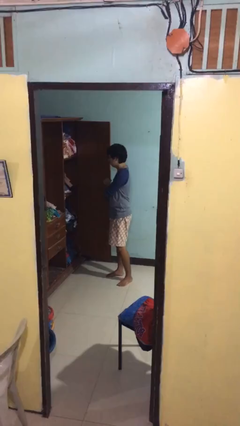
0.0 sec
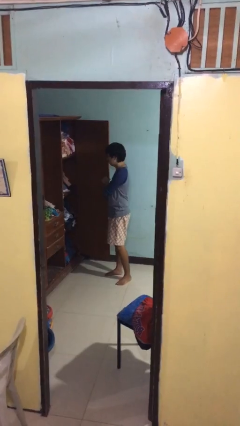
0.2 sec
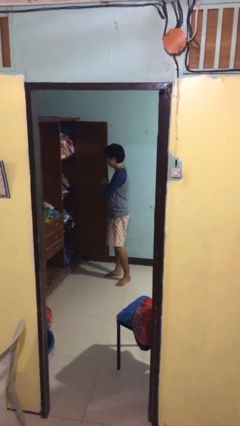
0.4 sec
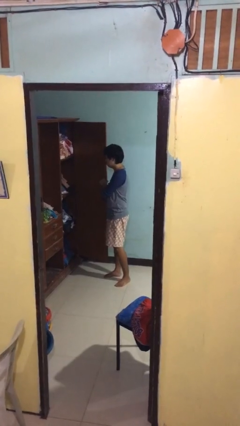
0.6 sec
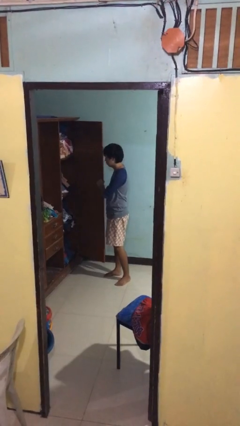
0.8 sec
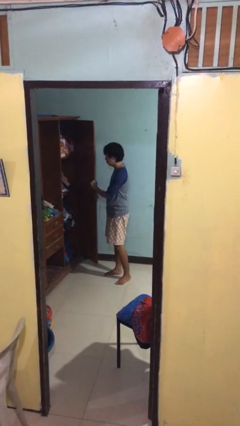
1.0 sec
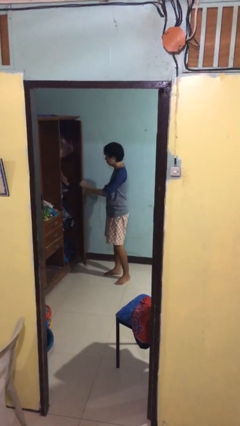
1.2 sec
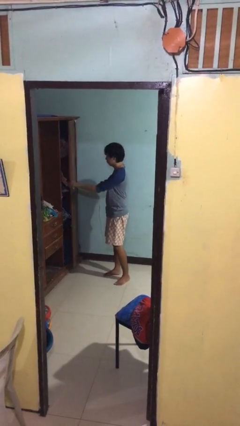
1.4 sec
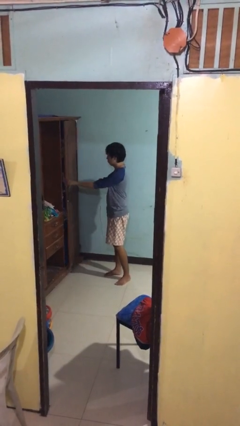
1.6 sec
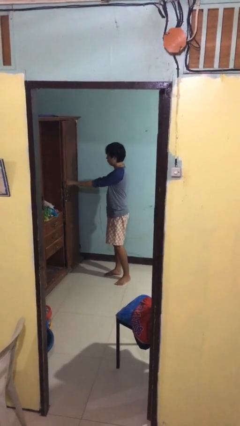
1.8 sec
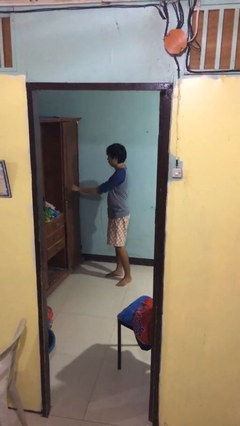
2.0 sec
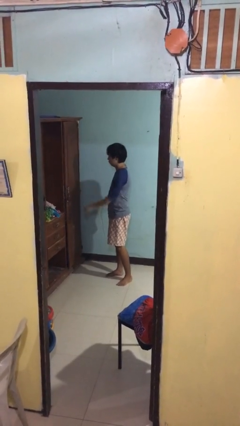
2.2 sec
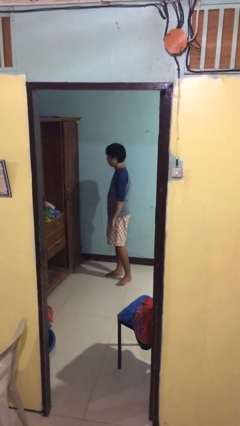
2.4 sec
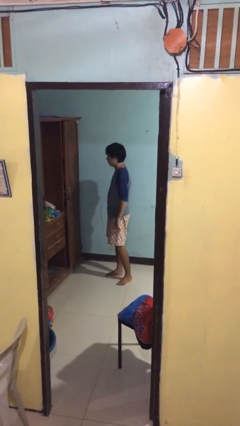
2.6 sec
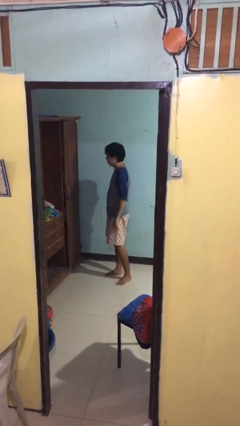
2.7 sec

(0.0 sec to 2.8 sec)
person closes closet door

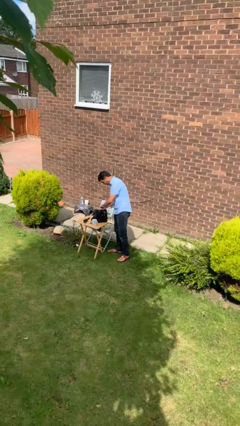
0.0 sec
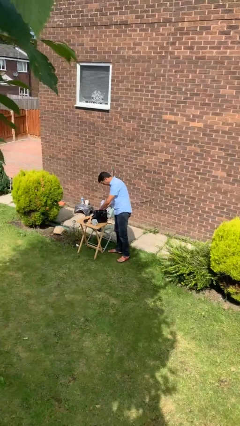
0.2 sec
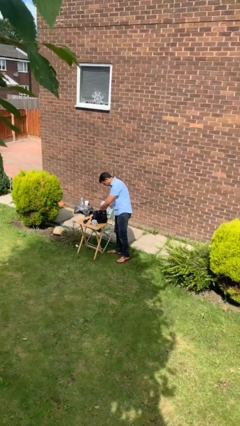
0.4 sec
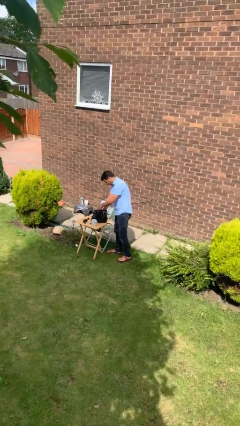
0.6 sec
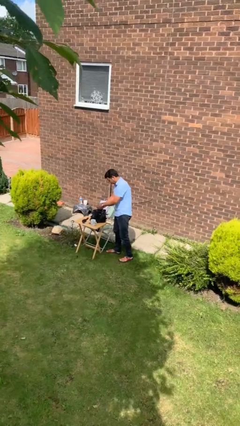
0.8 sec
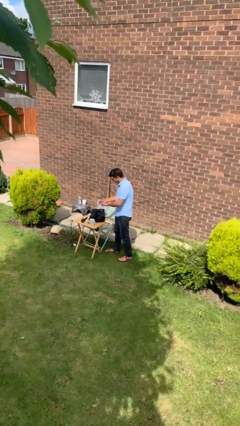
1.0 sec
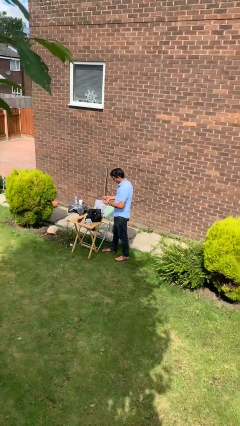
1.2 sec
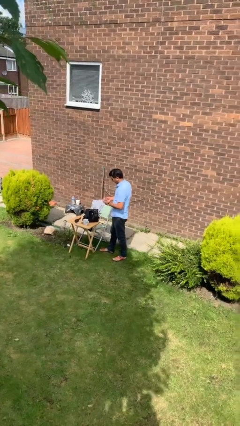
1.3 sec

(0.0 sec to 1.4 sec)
person takes object from backpack

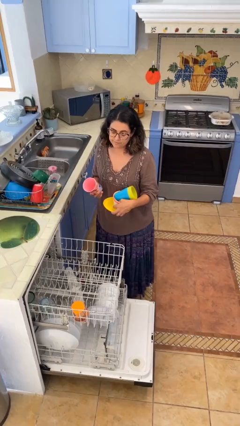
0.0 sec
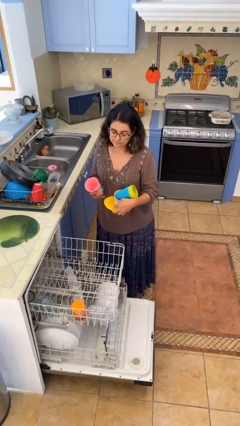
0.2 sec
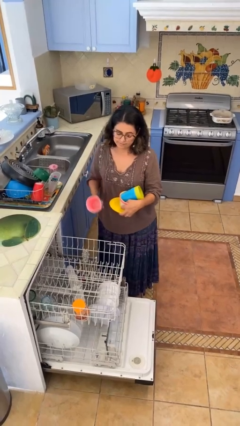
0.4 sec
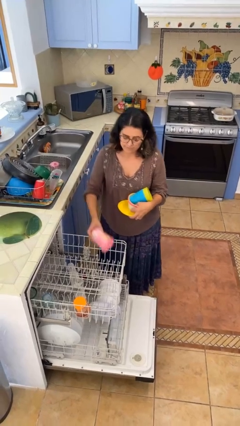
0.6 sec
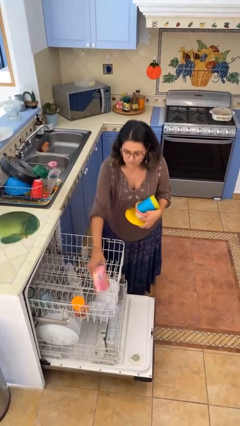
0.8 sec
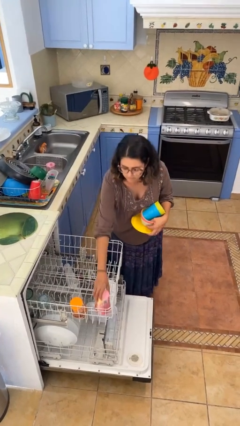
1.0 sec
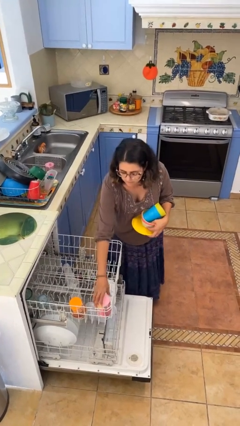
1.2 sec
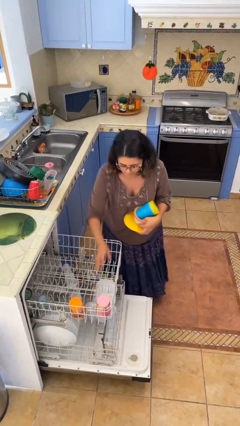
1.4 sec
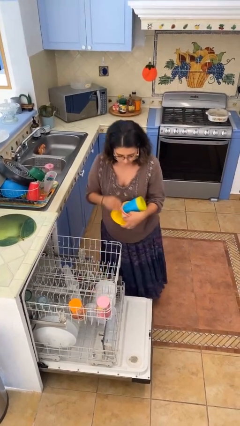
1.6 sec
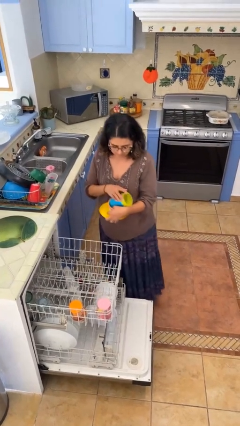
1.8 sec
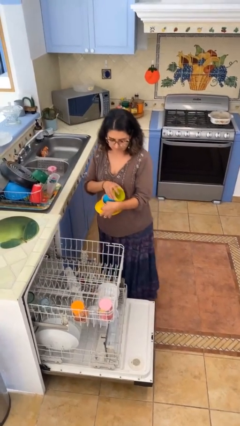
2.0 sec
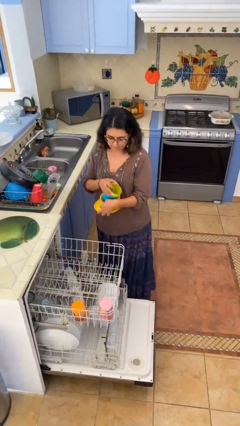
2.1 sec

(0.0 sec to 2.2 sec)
person loads dishwasher

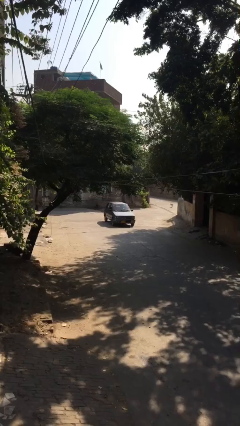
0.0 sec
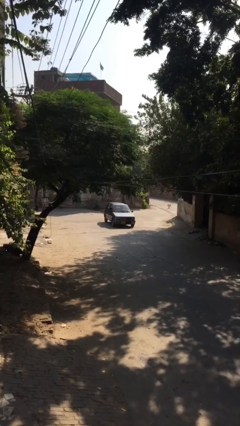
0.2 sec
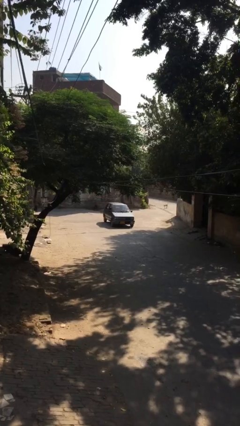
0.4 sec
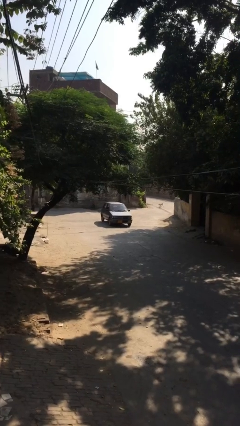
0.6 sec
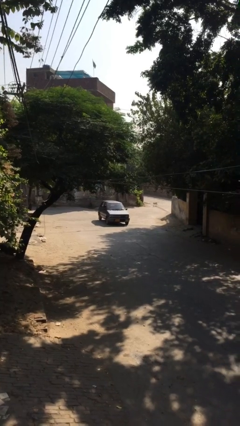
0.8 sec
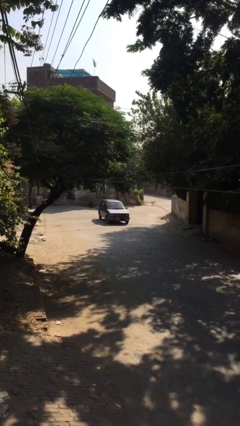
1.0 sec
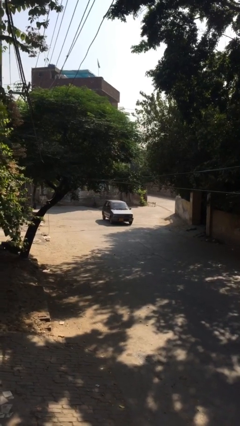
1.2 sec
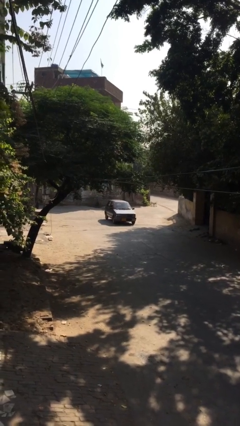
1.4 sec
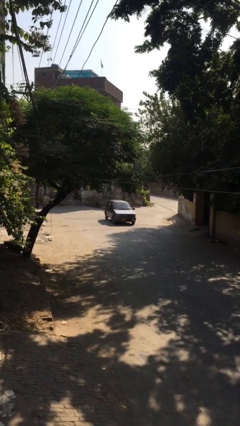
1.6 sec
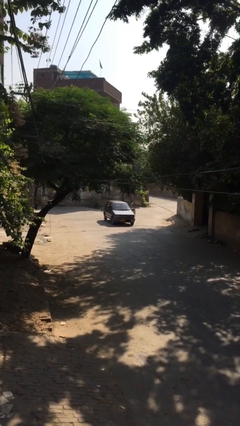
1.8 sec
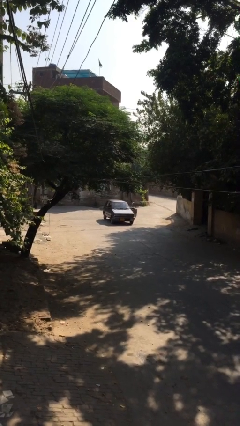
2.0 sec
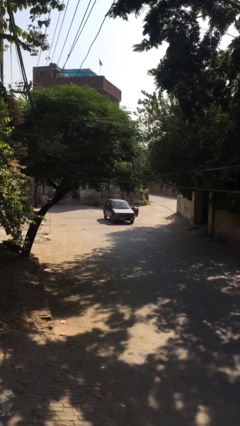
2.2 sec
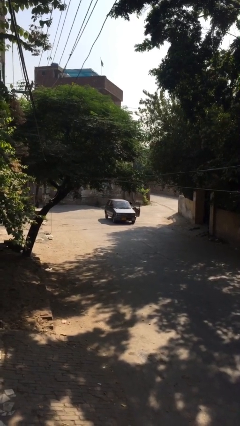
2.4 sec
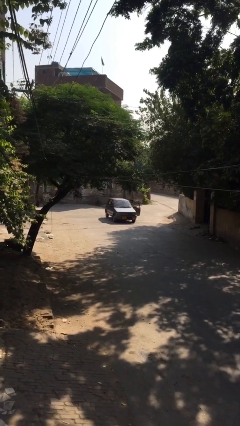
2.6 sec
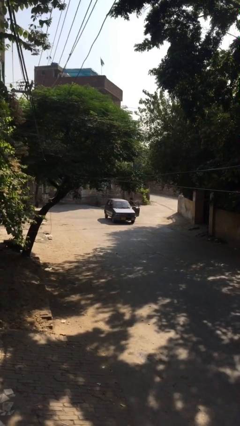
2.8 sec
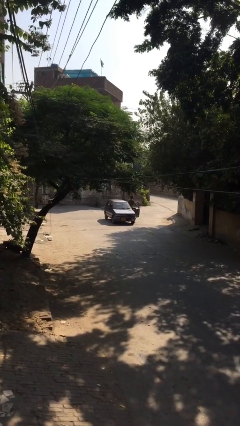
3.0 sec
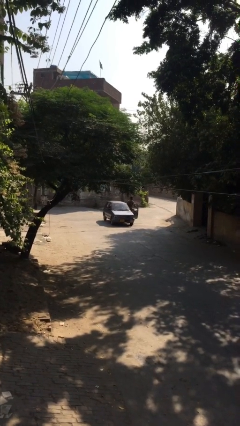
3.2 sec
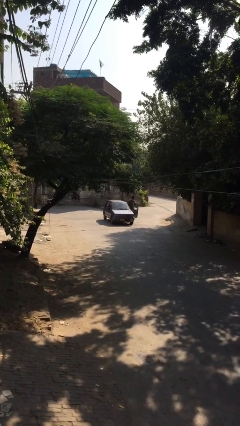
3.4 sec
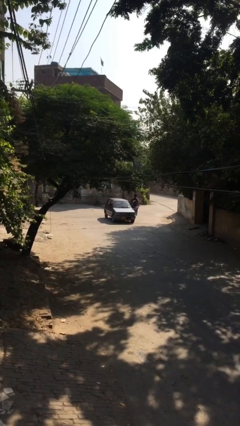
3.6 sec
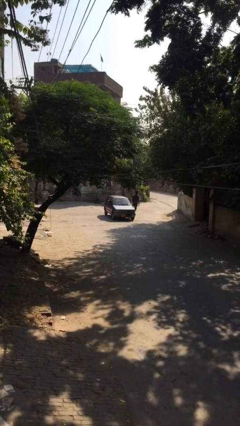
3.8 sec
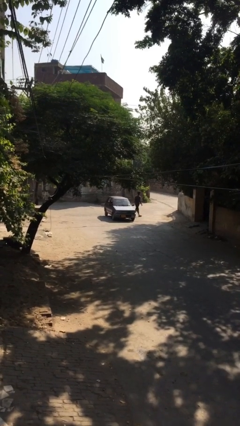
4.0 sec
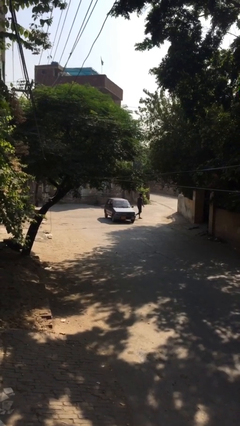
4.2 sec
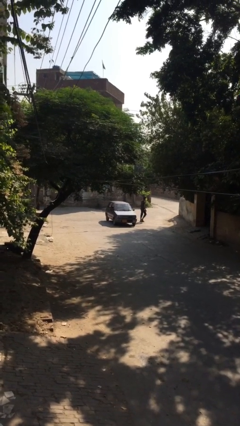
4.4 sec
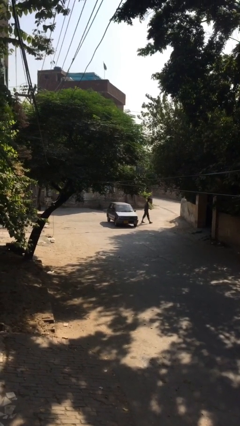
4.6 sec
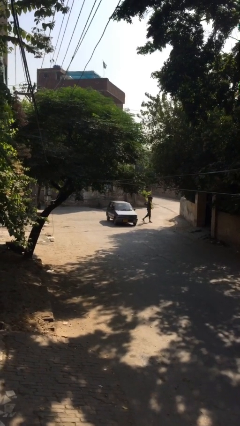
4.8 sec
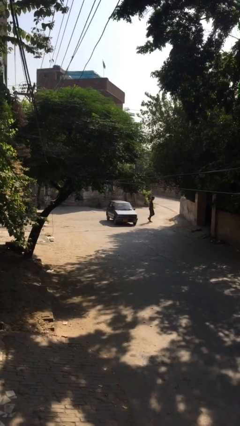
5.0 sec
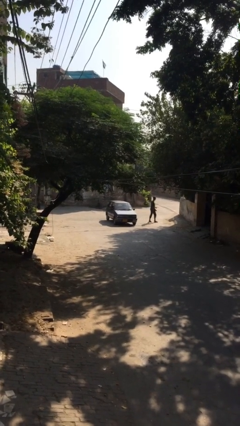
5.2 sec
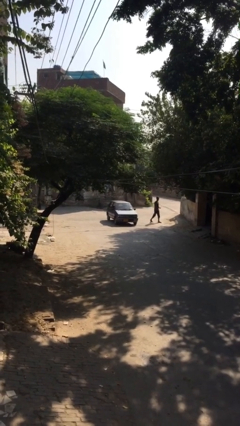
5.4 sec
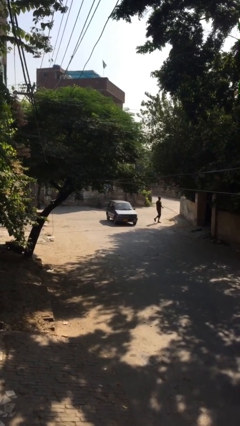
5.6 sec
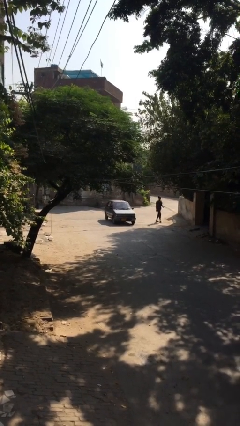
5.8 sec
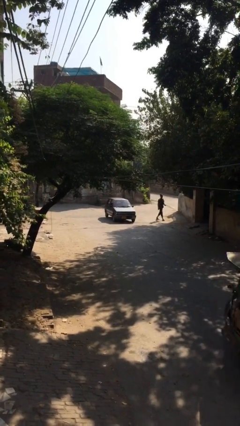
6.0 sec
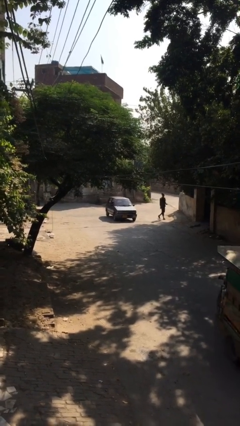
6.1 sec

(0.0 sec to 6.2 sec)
car drops off person

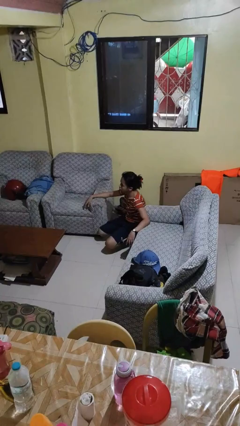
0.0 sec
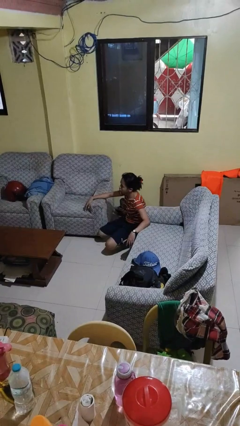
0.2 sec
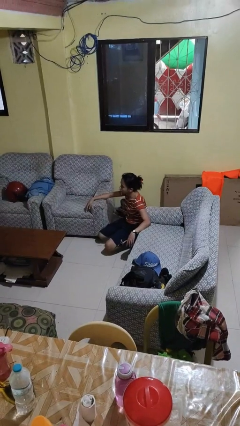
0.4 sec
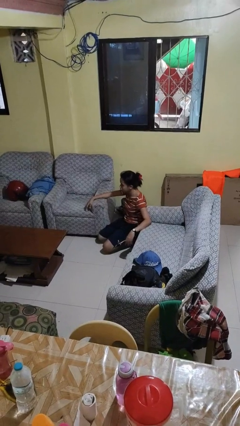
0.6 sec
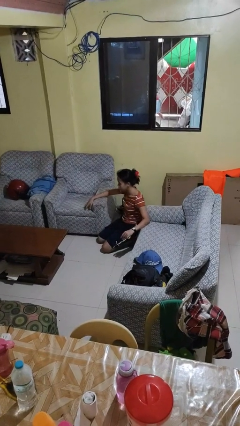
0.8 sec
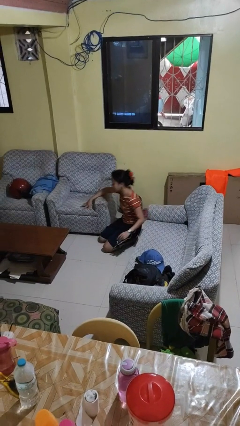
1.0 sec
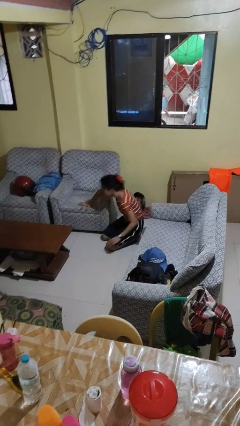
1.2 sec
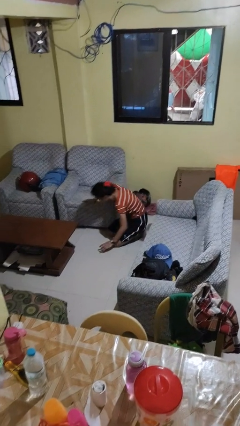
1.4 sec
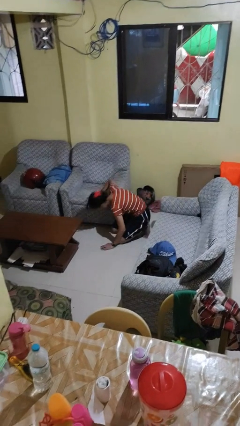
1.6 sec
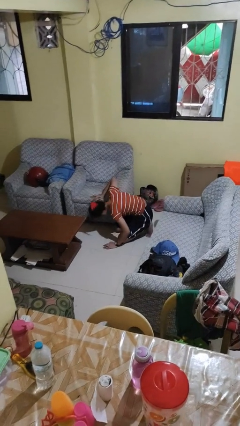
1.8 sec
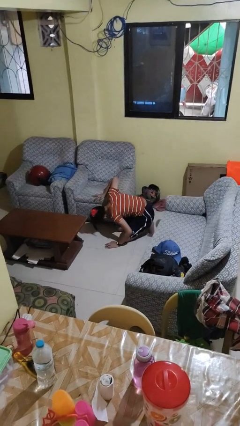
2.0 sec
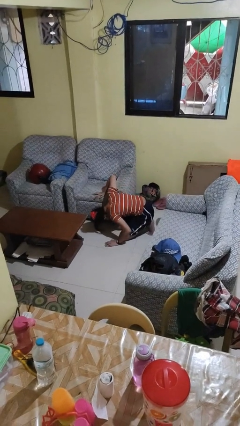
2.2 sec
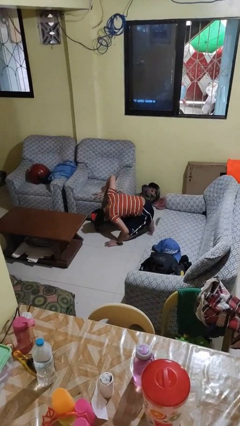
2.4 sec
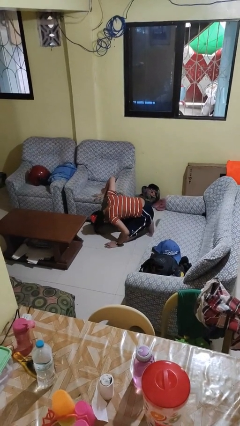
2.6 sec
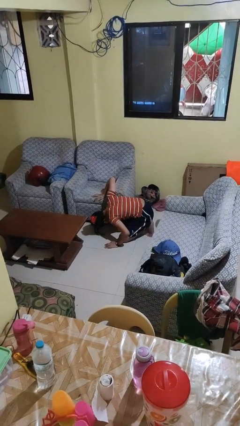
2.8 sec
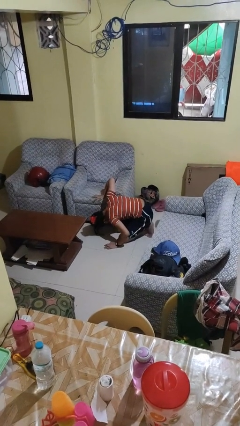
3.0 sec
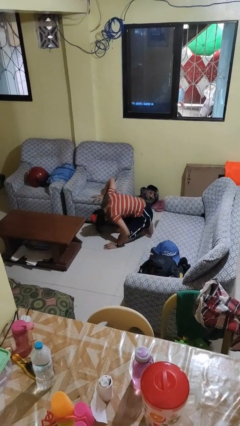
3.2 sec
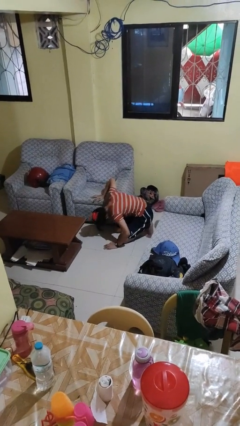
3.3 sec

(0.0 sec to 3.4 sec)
person searches under couch

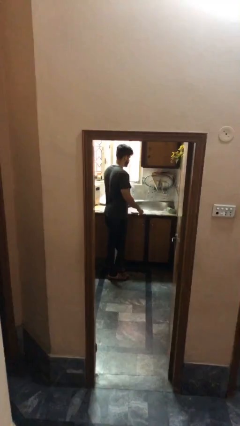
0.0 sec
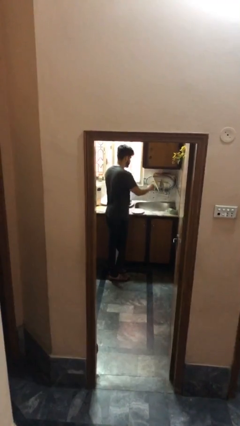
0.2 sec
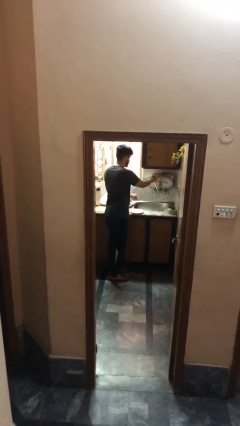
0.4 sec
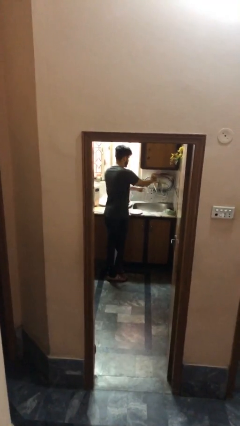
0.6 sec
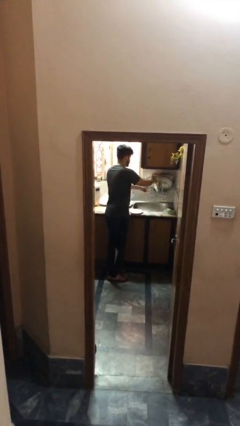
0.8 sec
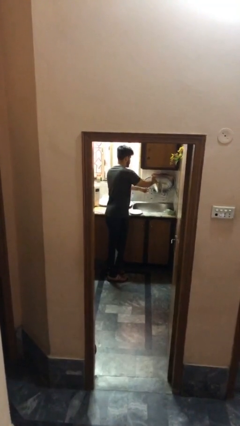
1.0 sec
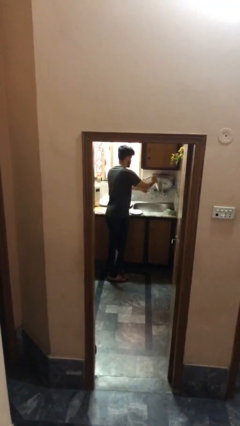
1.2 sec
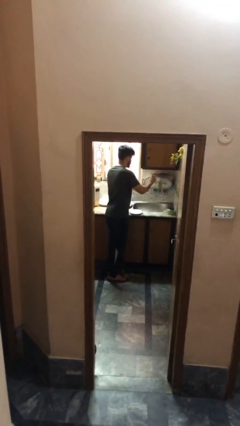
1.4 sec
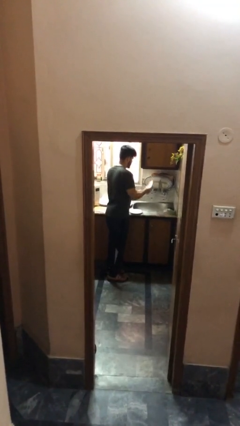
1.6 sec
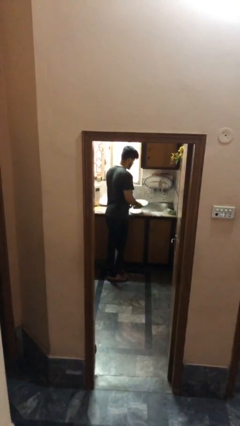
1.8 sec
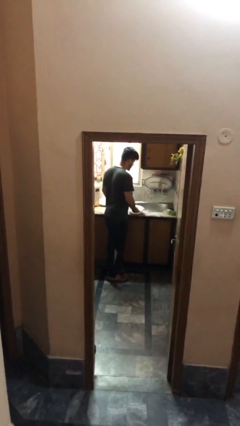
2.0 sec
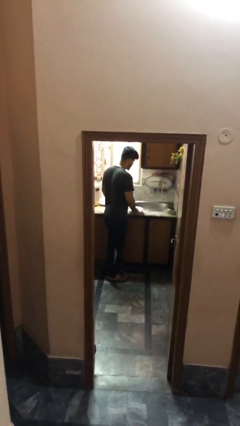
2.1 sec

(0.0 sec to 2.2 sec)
person unloads dishwasher
